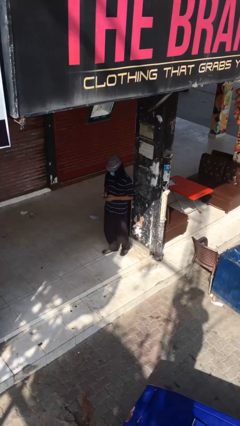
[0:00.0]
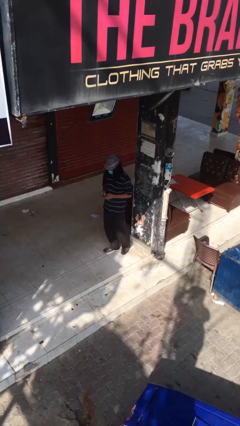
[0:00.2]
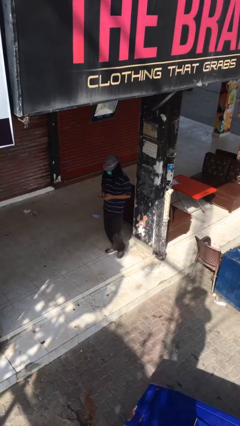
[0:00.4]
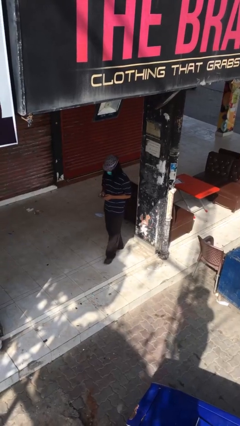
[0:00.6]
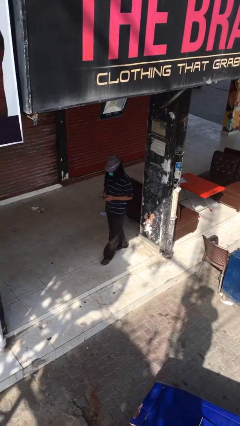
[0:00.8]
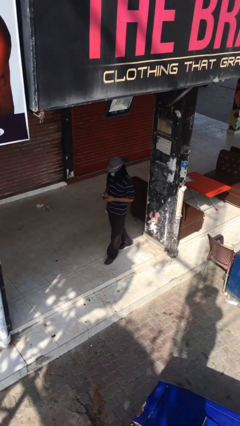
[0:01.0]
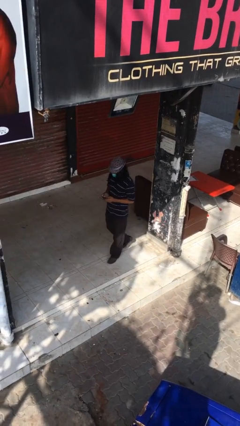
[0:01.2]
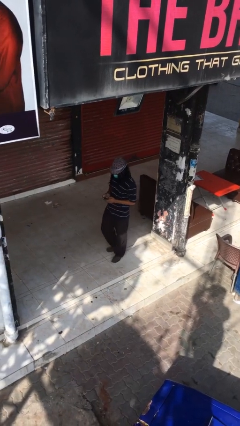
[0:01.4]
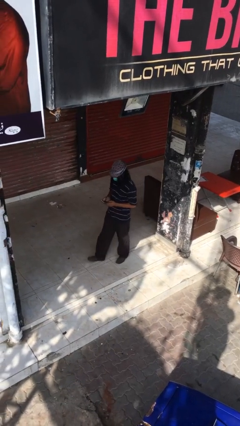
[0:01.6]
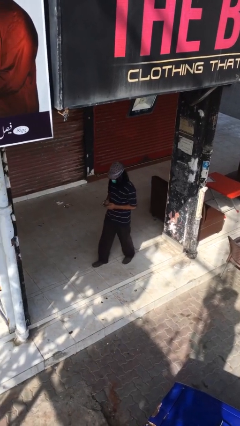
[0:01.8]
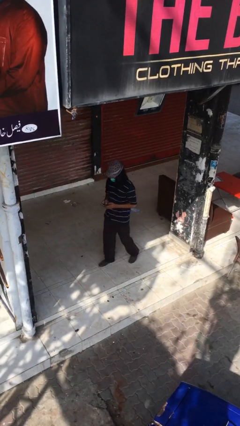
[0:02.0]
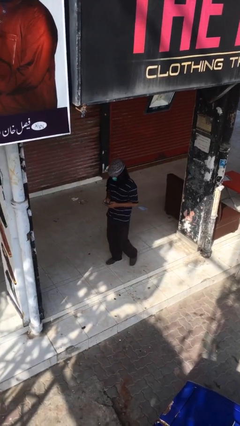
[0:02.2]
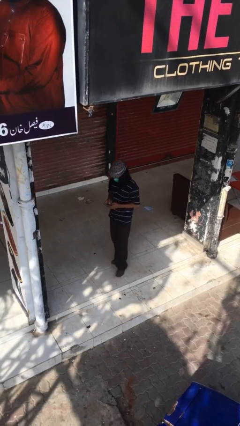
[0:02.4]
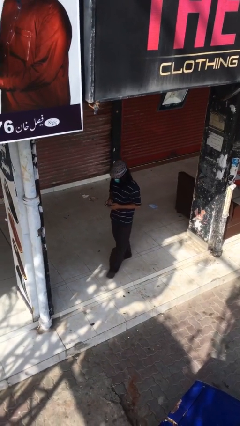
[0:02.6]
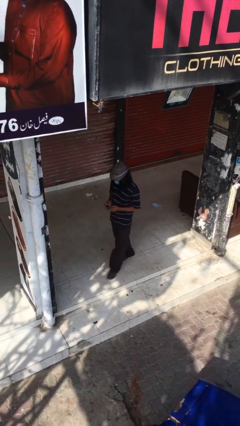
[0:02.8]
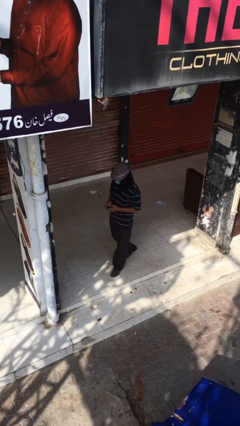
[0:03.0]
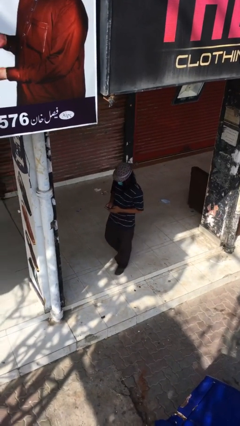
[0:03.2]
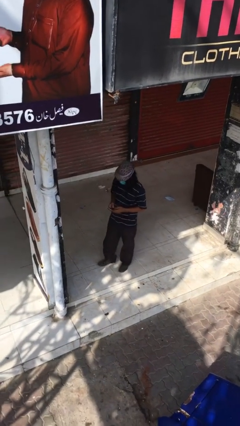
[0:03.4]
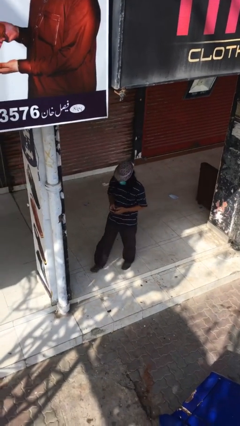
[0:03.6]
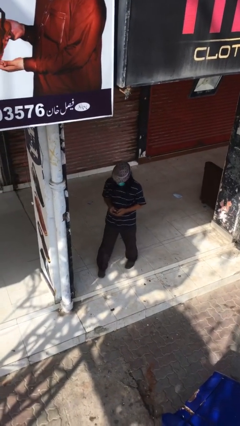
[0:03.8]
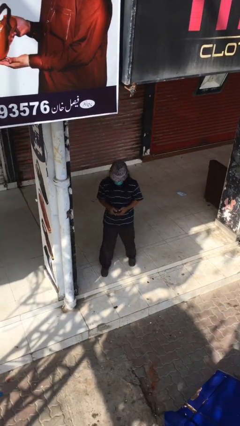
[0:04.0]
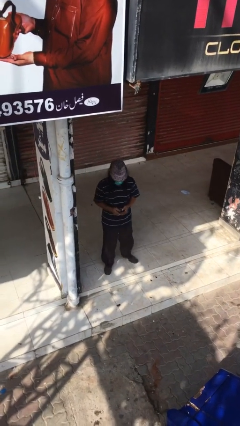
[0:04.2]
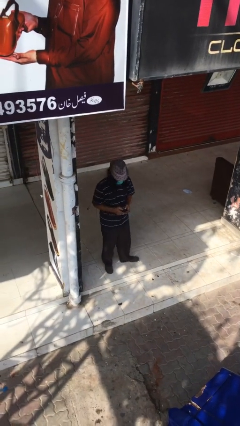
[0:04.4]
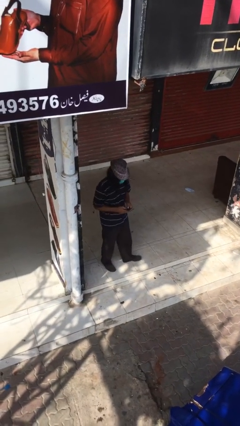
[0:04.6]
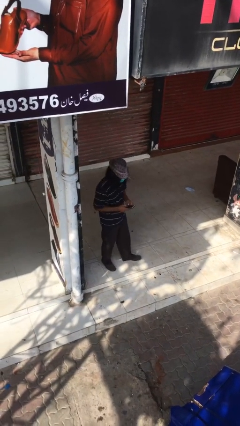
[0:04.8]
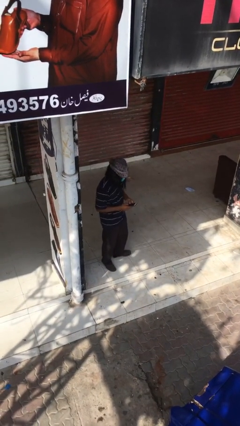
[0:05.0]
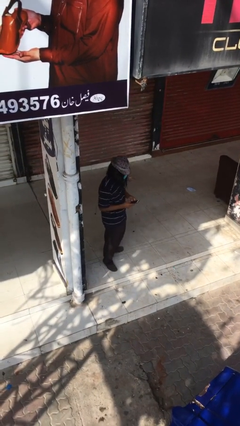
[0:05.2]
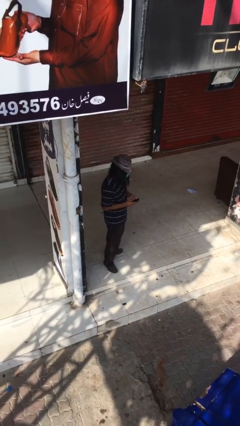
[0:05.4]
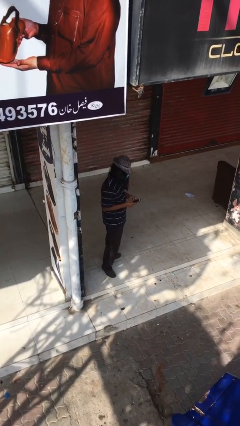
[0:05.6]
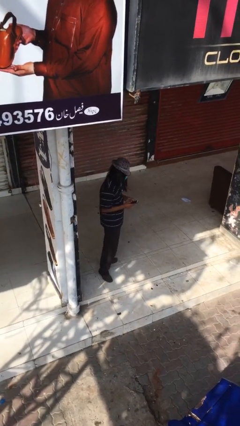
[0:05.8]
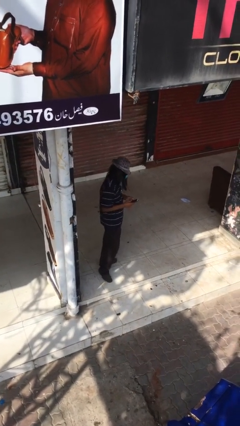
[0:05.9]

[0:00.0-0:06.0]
person texts on phone

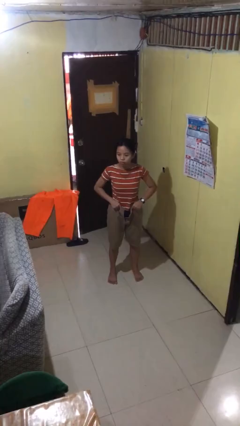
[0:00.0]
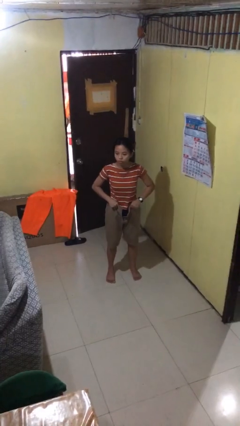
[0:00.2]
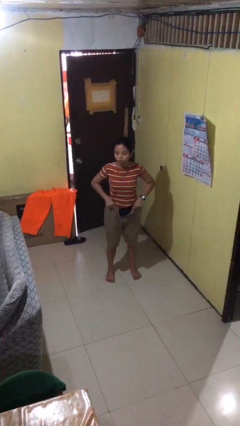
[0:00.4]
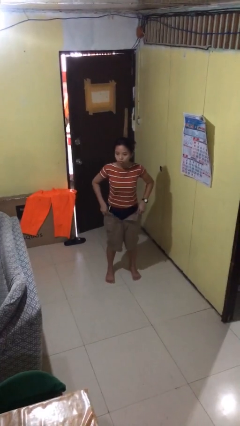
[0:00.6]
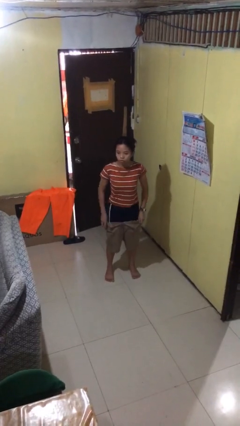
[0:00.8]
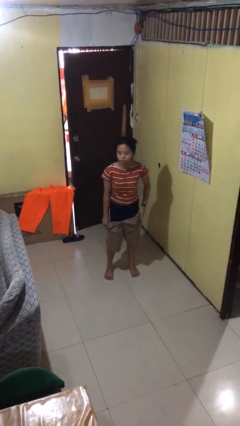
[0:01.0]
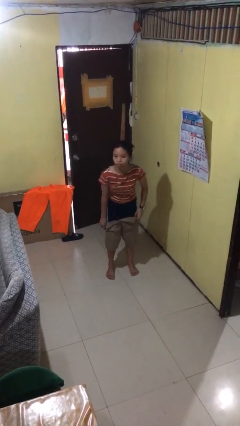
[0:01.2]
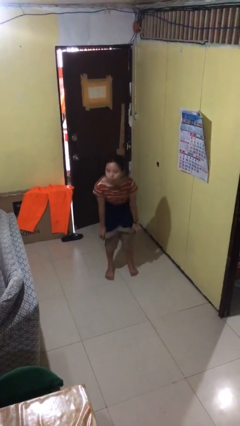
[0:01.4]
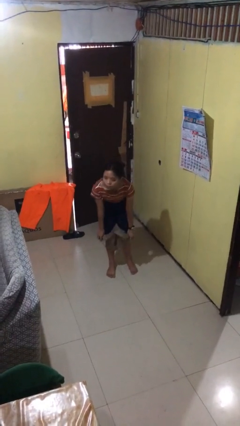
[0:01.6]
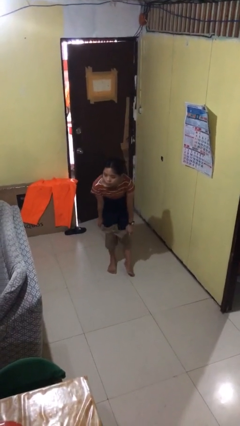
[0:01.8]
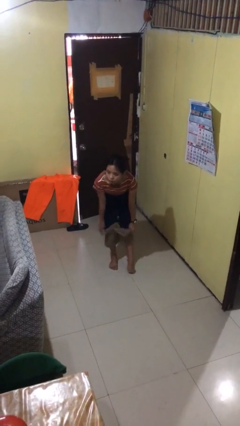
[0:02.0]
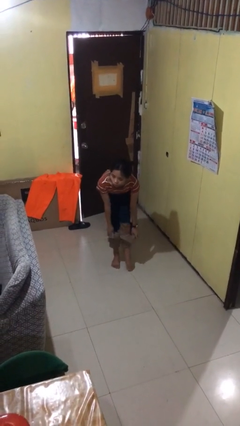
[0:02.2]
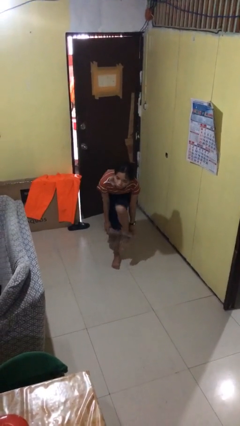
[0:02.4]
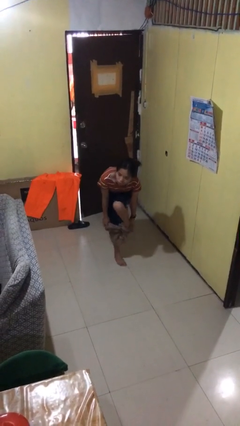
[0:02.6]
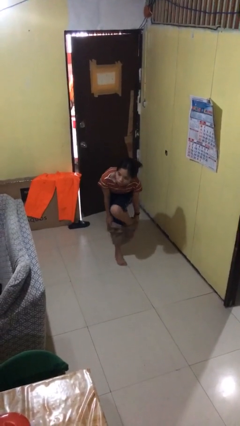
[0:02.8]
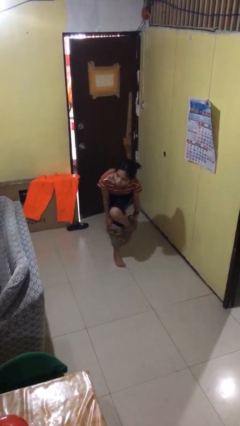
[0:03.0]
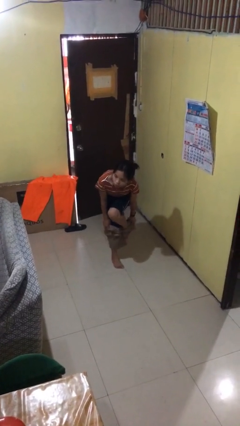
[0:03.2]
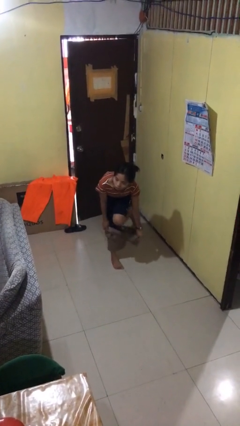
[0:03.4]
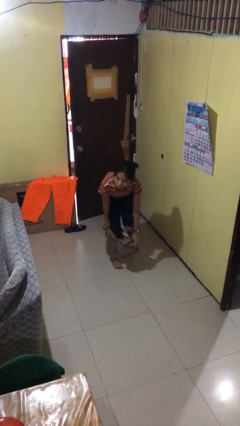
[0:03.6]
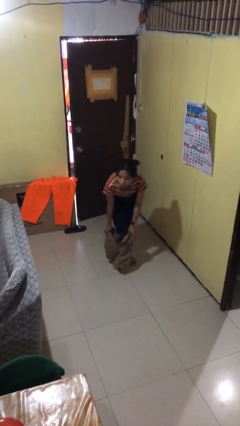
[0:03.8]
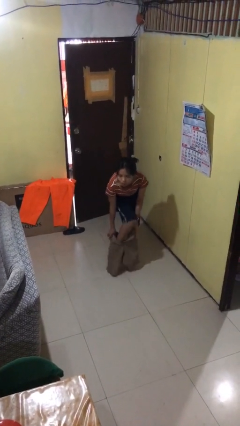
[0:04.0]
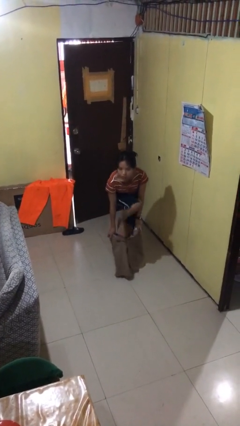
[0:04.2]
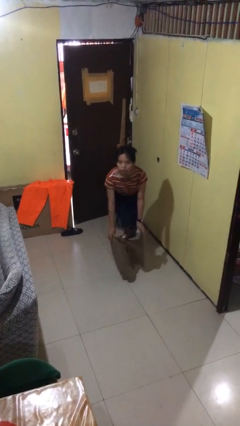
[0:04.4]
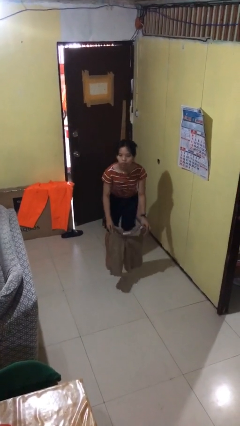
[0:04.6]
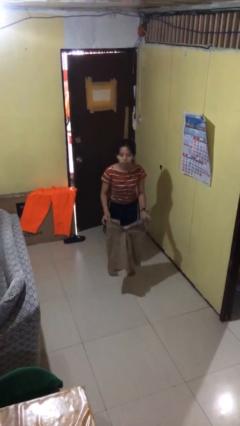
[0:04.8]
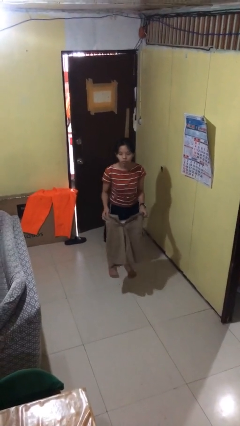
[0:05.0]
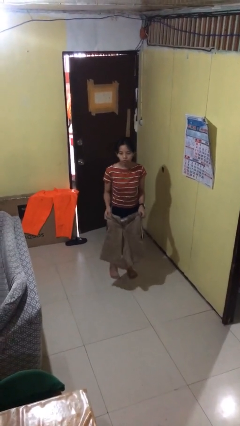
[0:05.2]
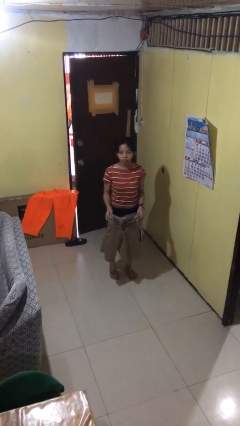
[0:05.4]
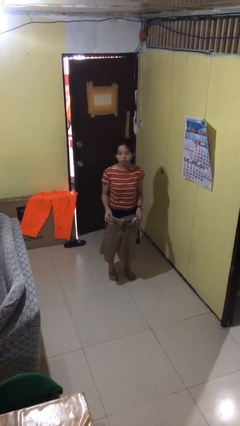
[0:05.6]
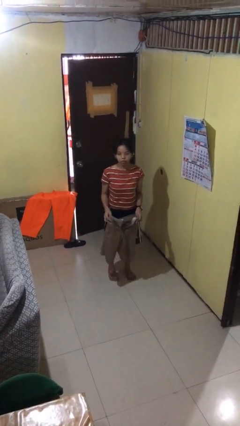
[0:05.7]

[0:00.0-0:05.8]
person takes off pants

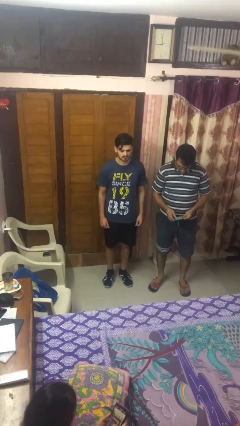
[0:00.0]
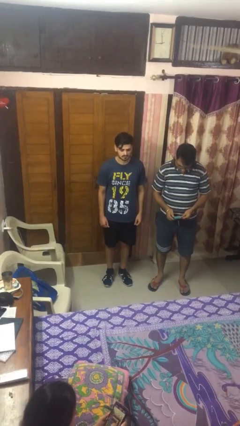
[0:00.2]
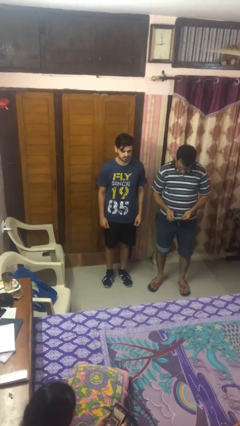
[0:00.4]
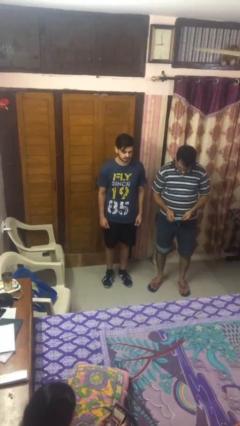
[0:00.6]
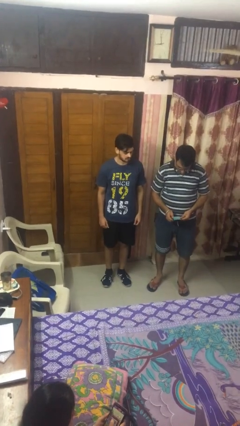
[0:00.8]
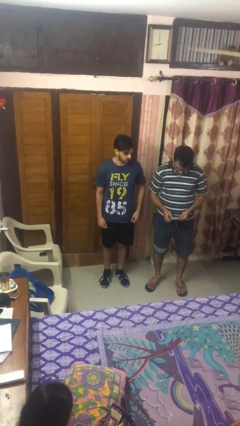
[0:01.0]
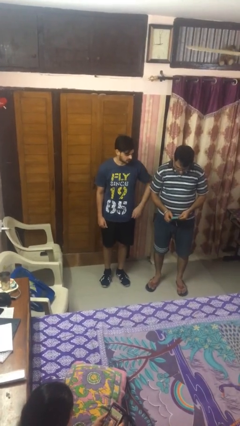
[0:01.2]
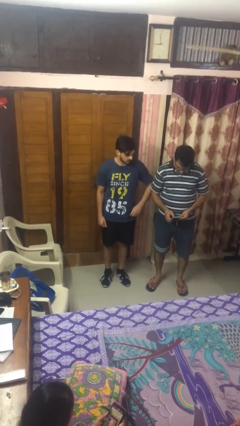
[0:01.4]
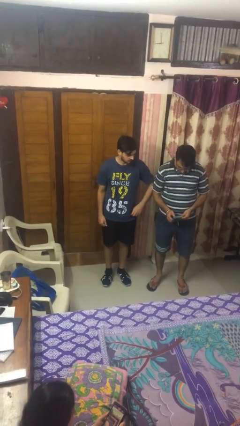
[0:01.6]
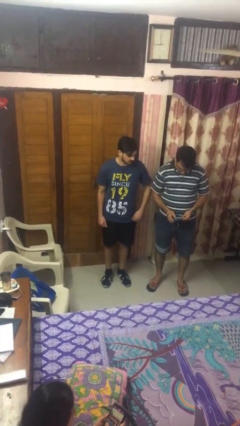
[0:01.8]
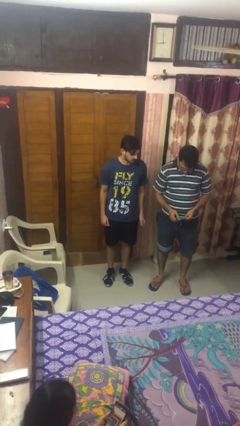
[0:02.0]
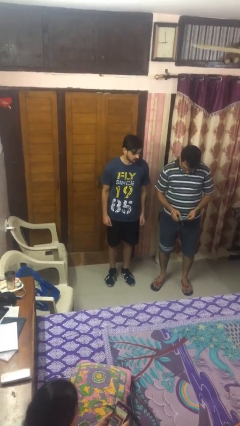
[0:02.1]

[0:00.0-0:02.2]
person nudges person with elbow

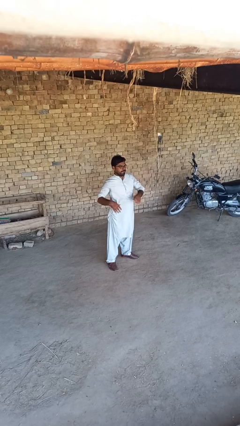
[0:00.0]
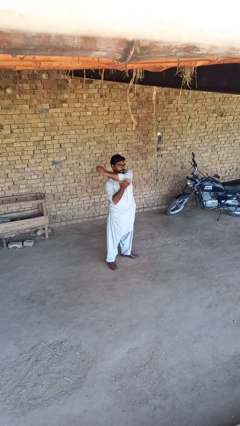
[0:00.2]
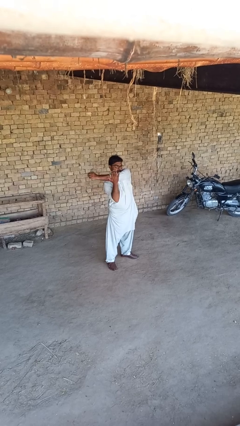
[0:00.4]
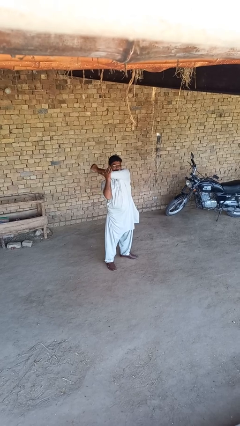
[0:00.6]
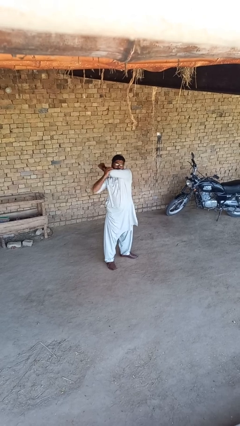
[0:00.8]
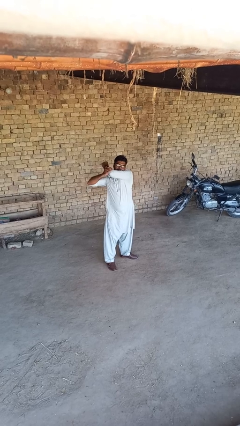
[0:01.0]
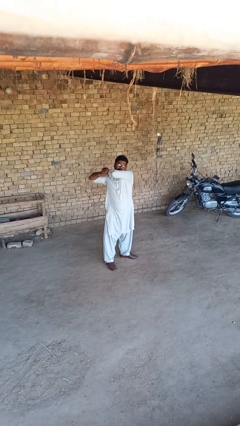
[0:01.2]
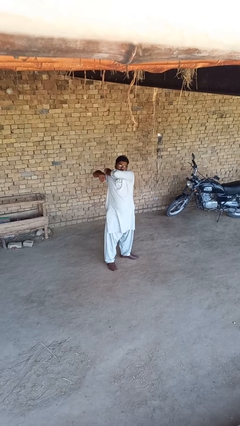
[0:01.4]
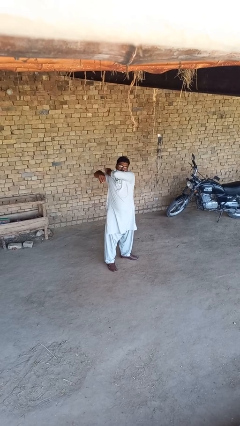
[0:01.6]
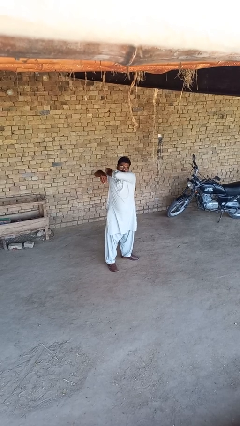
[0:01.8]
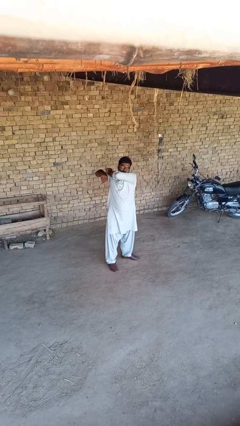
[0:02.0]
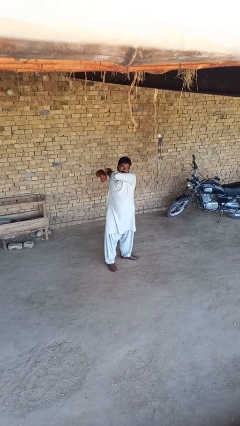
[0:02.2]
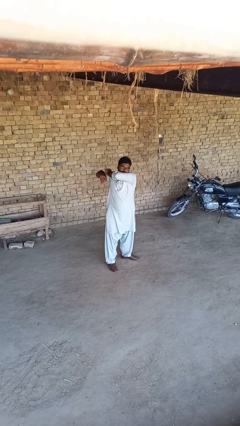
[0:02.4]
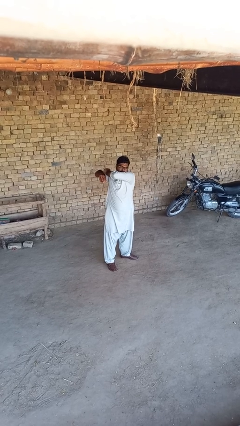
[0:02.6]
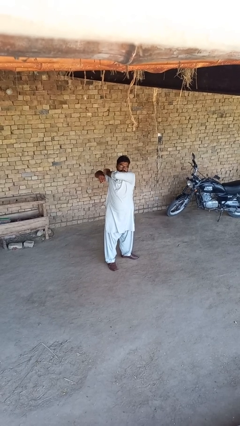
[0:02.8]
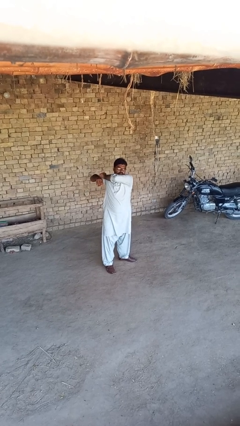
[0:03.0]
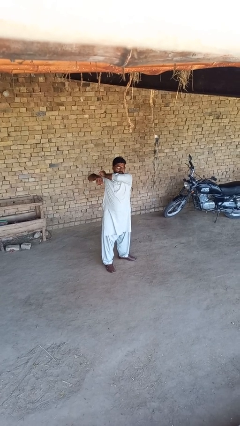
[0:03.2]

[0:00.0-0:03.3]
person stretches arms to side

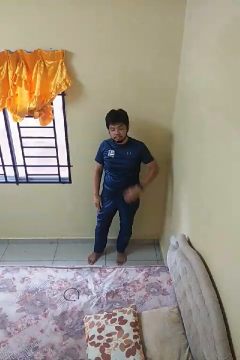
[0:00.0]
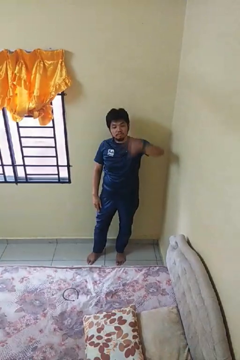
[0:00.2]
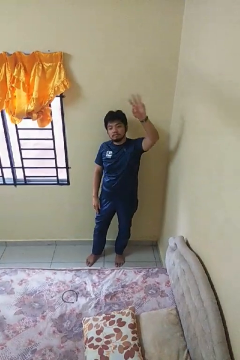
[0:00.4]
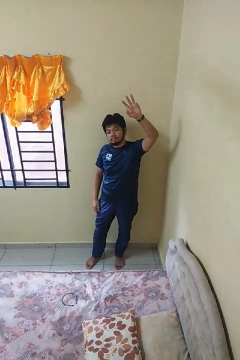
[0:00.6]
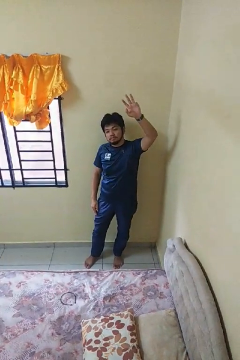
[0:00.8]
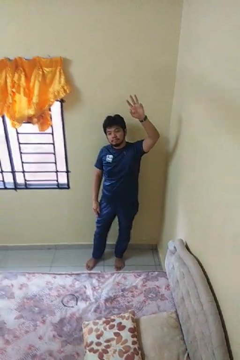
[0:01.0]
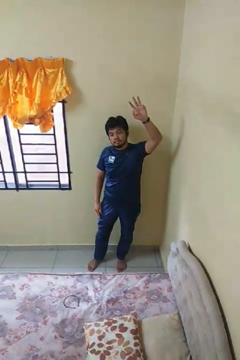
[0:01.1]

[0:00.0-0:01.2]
person gestures swipe up
